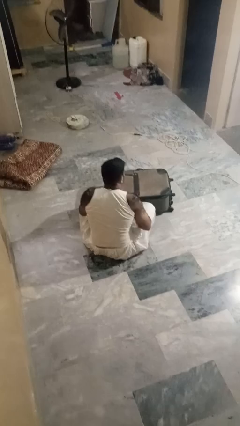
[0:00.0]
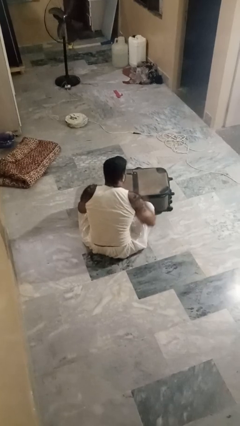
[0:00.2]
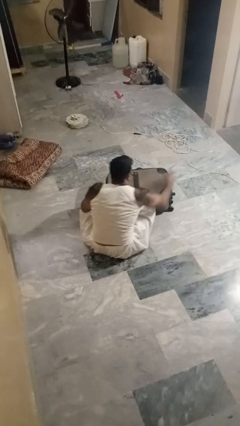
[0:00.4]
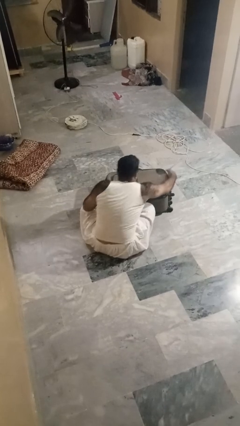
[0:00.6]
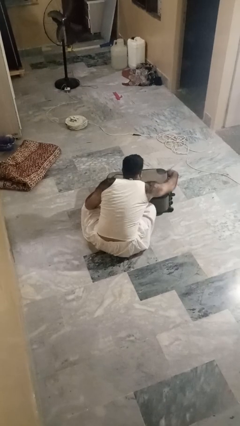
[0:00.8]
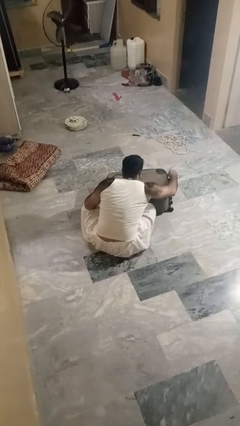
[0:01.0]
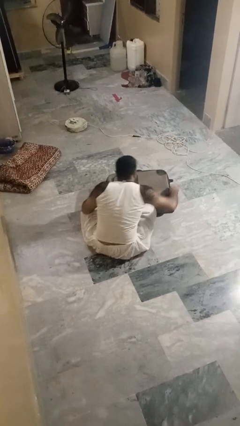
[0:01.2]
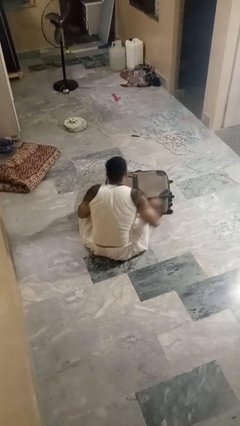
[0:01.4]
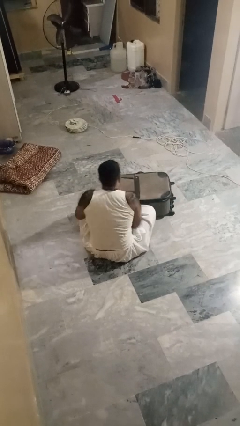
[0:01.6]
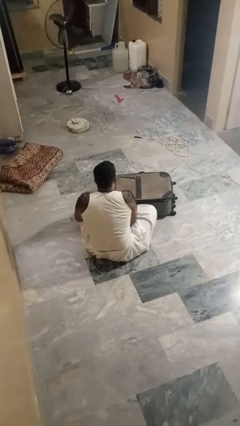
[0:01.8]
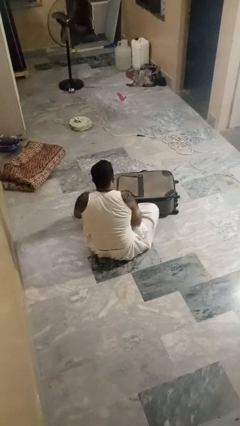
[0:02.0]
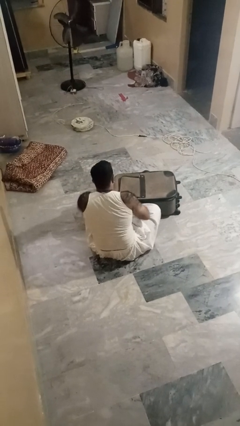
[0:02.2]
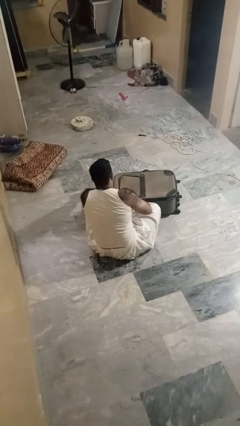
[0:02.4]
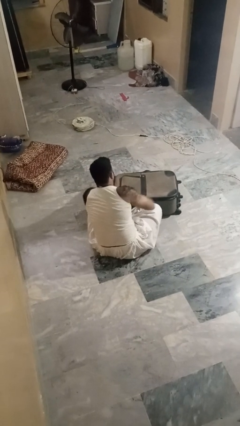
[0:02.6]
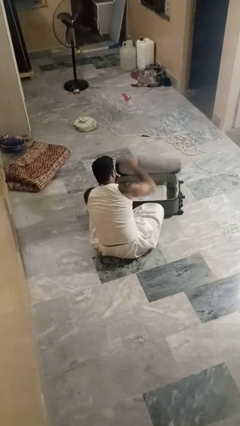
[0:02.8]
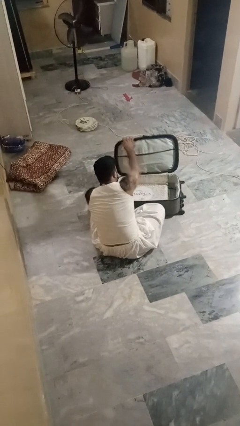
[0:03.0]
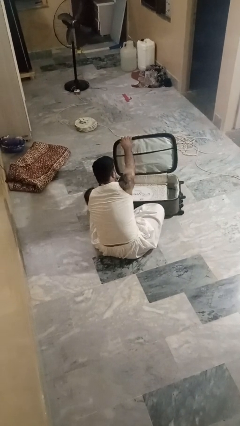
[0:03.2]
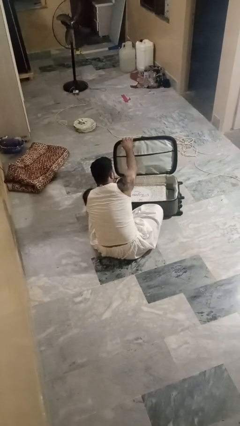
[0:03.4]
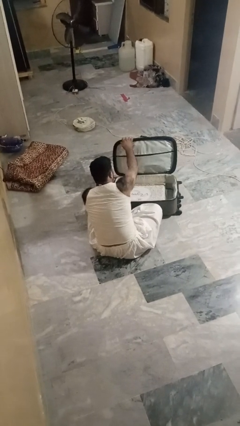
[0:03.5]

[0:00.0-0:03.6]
person opens suitcase

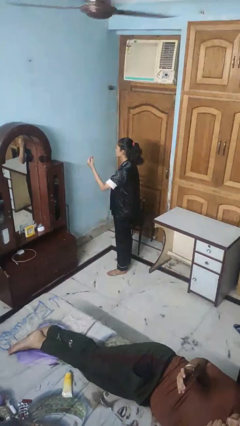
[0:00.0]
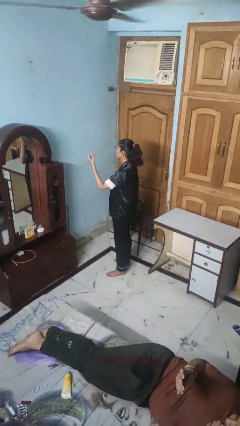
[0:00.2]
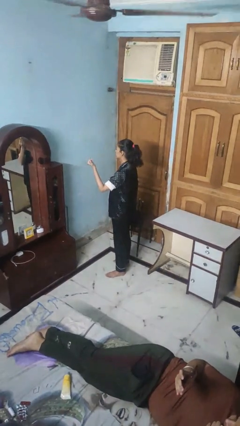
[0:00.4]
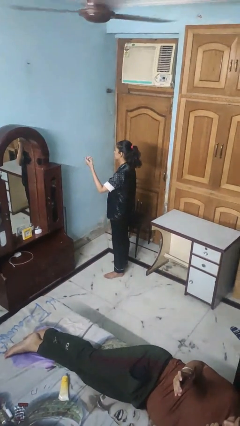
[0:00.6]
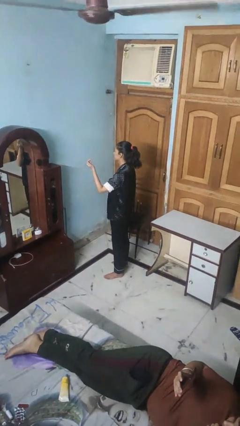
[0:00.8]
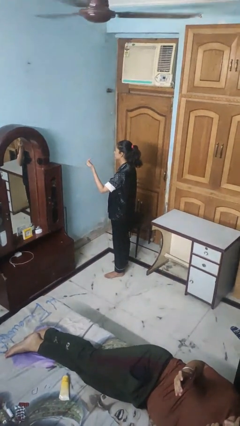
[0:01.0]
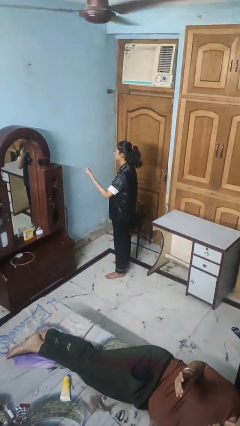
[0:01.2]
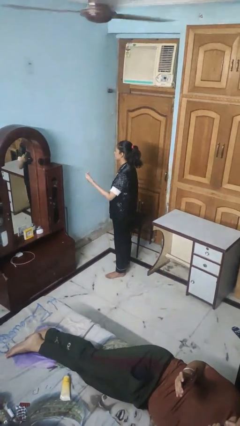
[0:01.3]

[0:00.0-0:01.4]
person snaps fingers

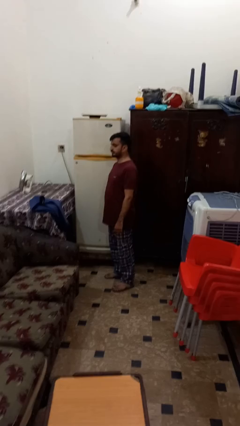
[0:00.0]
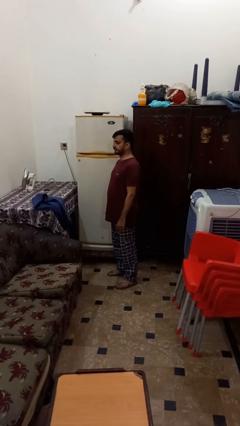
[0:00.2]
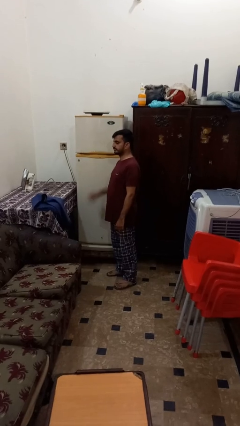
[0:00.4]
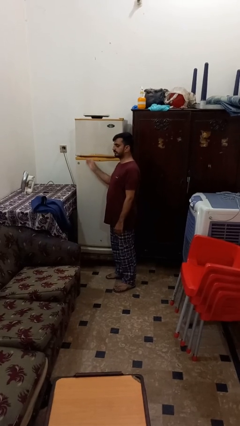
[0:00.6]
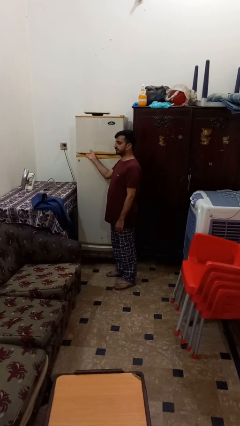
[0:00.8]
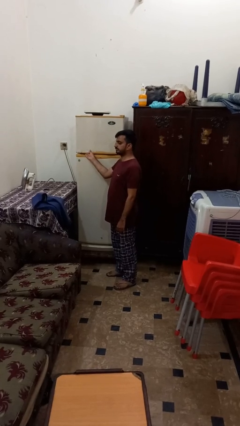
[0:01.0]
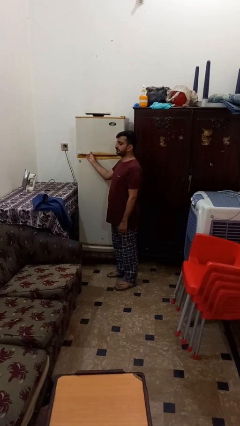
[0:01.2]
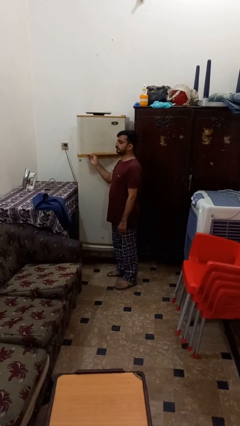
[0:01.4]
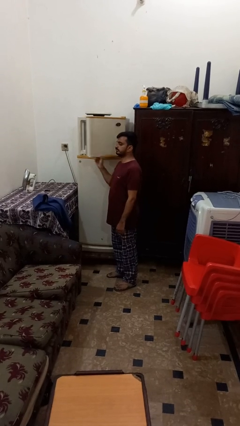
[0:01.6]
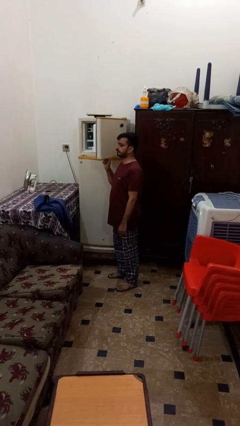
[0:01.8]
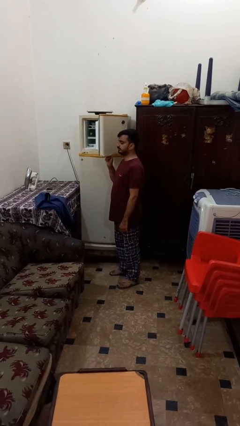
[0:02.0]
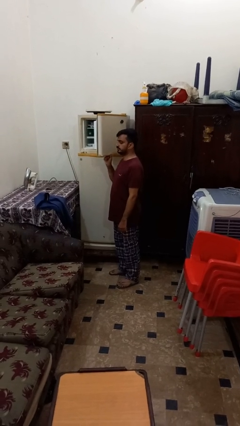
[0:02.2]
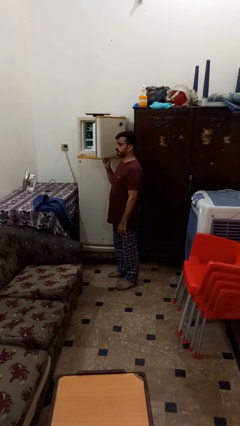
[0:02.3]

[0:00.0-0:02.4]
person opens refrigerator

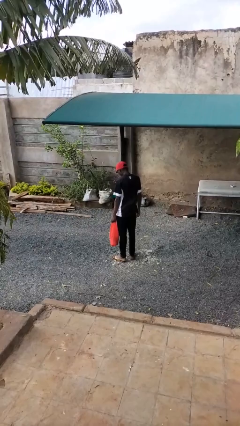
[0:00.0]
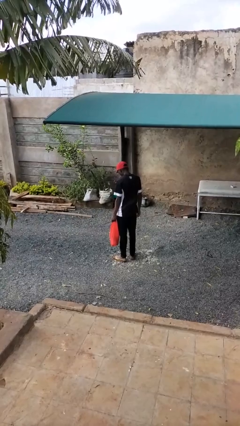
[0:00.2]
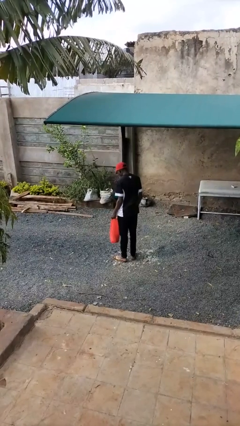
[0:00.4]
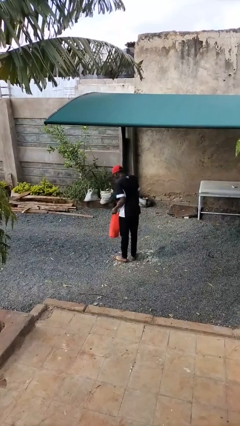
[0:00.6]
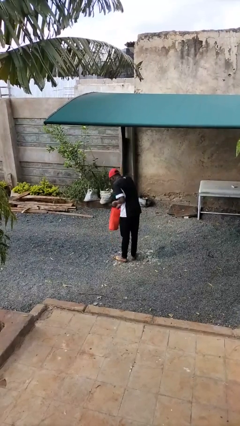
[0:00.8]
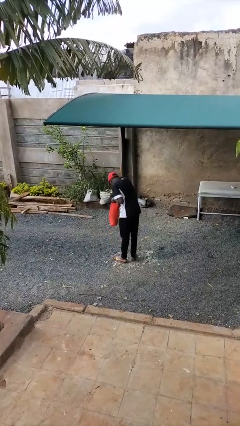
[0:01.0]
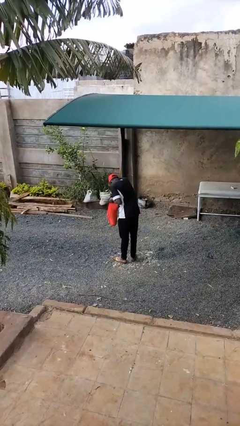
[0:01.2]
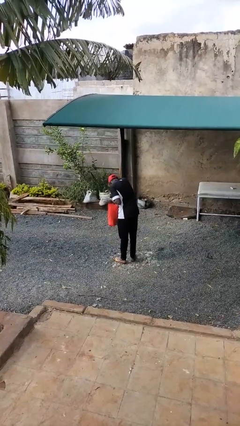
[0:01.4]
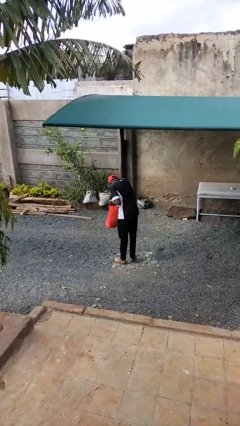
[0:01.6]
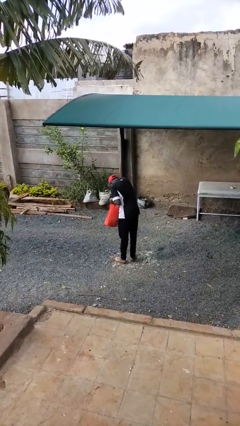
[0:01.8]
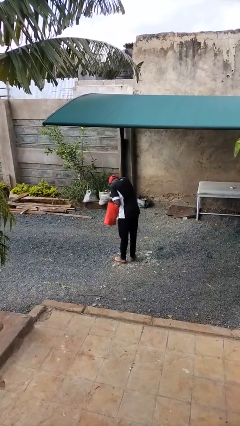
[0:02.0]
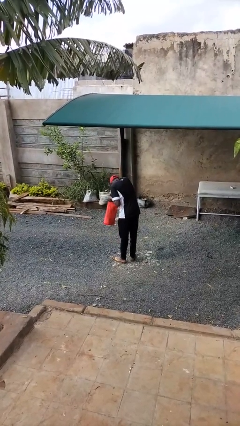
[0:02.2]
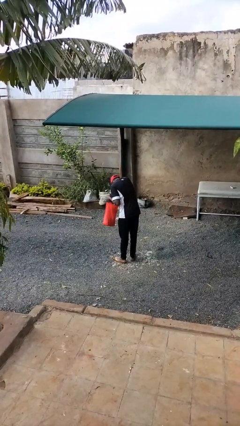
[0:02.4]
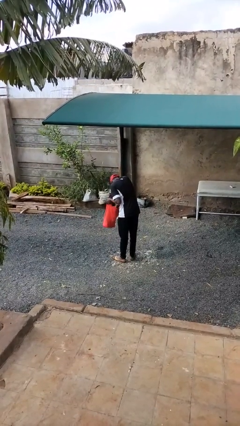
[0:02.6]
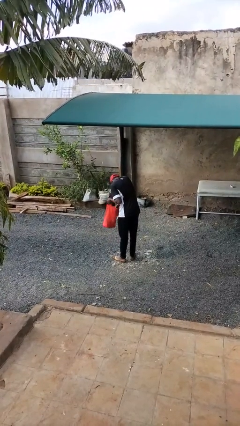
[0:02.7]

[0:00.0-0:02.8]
person searches in bag

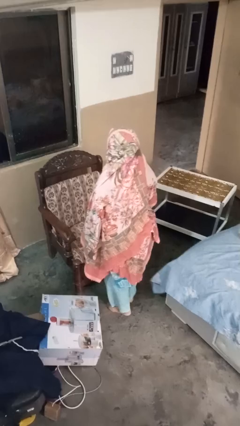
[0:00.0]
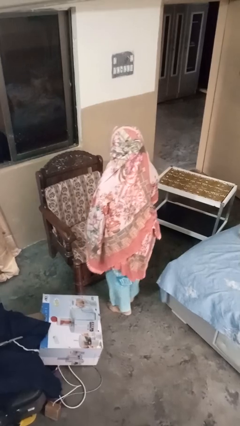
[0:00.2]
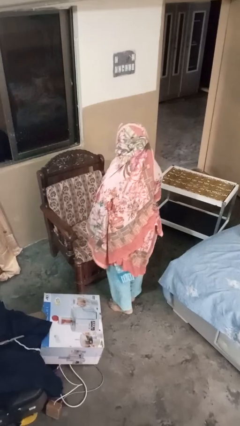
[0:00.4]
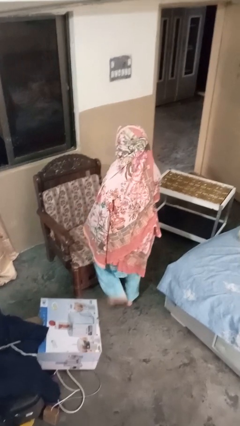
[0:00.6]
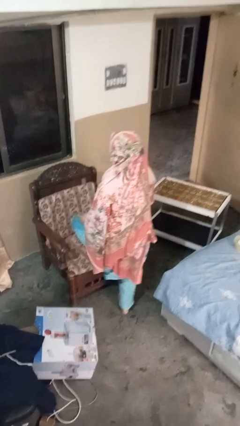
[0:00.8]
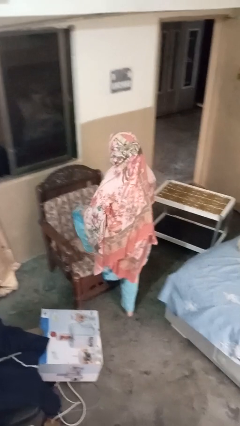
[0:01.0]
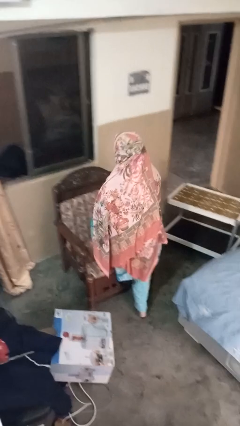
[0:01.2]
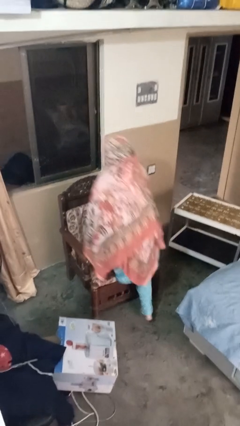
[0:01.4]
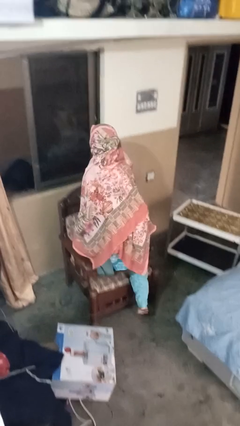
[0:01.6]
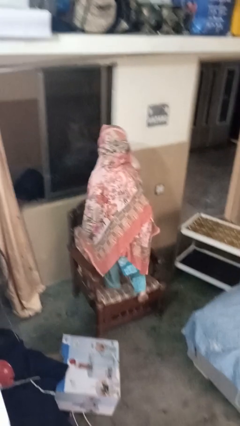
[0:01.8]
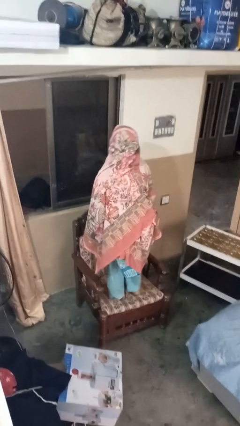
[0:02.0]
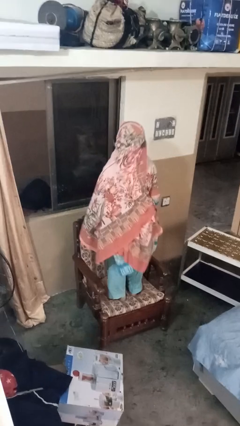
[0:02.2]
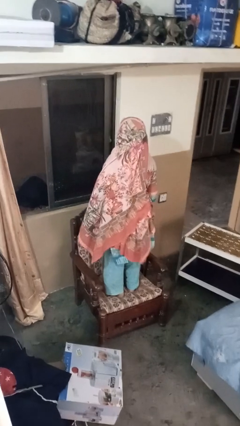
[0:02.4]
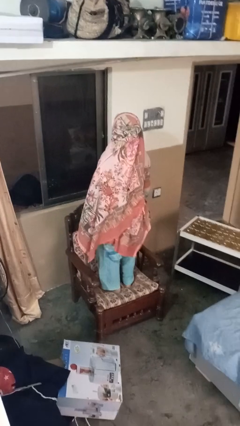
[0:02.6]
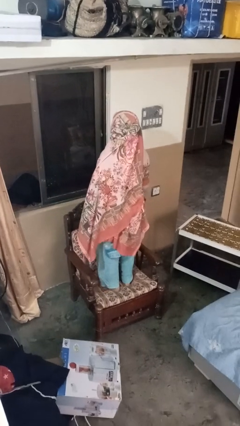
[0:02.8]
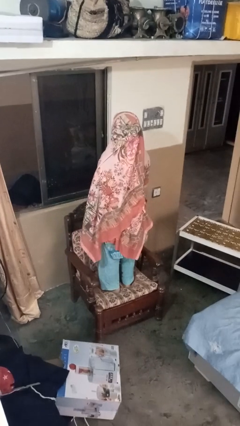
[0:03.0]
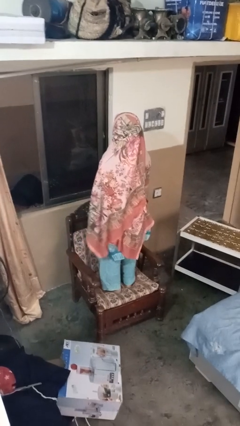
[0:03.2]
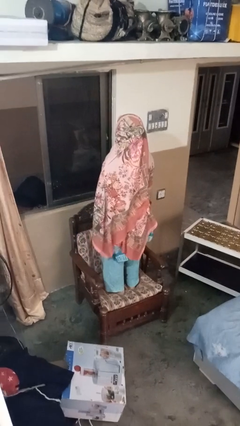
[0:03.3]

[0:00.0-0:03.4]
person climbs on couch

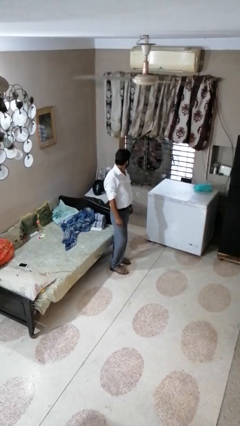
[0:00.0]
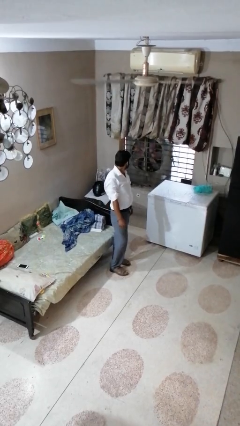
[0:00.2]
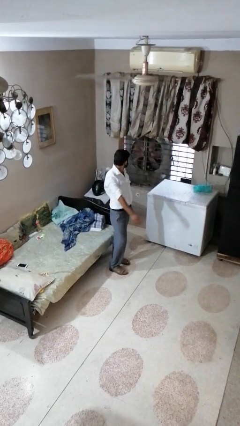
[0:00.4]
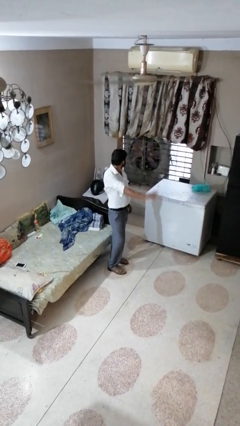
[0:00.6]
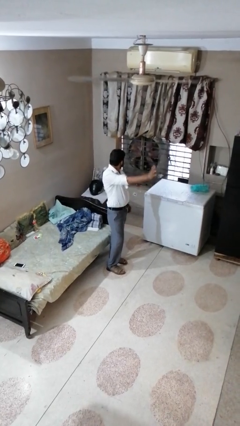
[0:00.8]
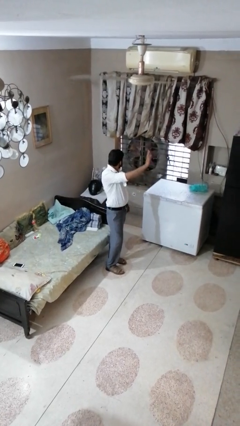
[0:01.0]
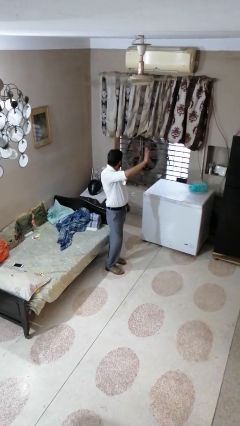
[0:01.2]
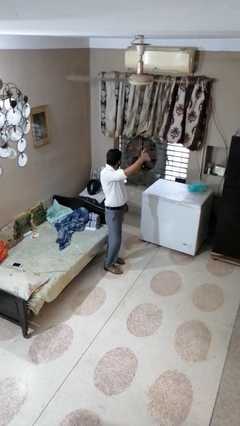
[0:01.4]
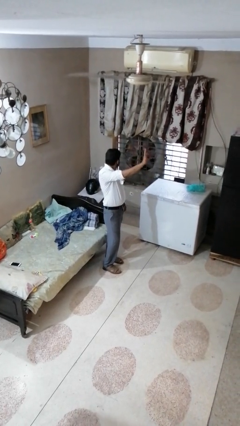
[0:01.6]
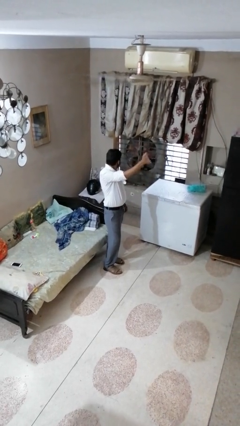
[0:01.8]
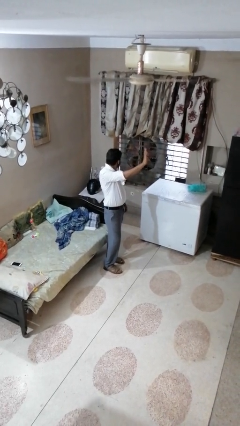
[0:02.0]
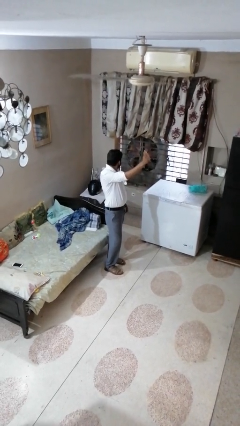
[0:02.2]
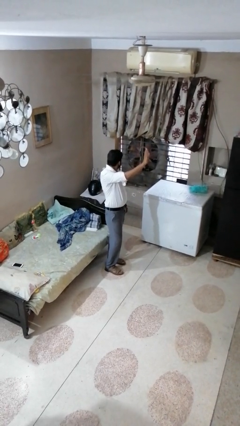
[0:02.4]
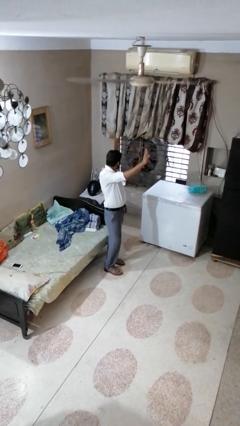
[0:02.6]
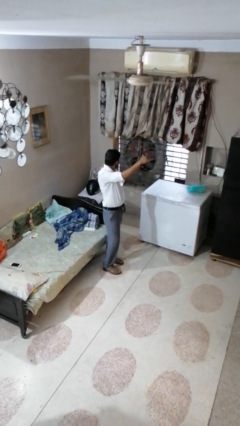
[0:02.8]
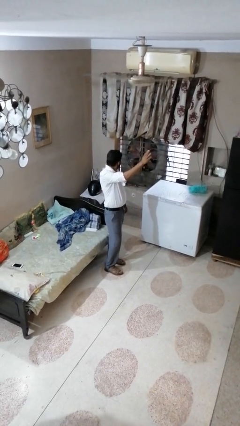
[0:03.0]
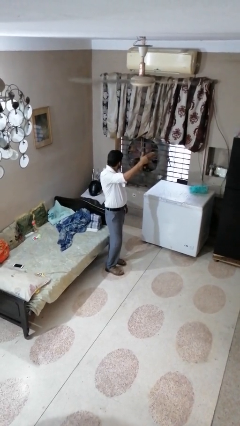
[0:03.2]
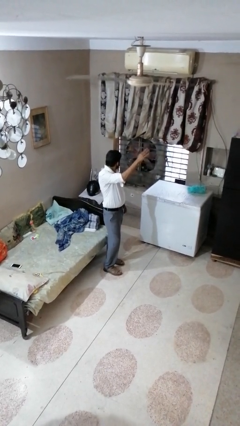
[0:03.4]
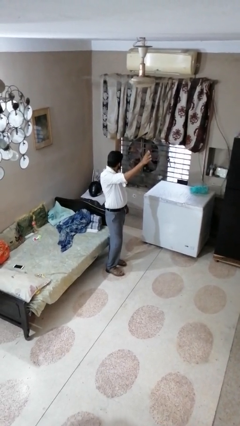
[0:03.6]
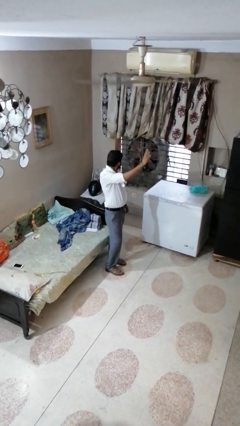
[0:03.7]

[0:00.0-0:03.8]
person waves at person

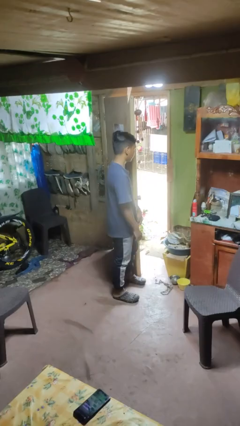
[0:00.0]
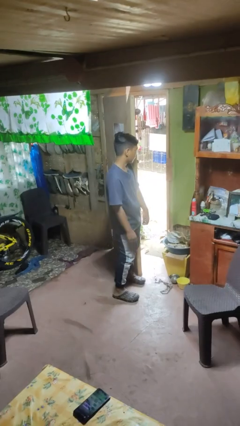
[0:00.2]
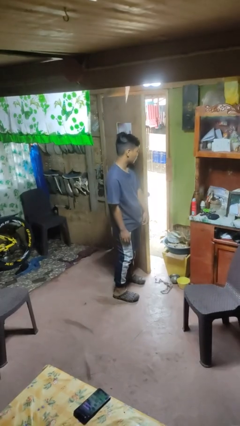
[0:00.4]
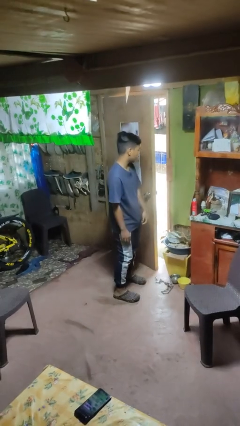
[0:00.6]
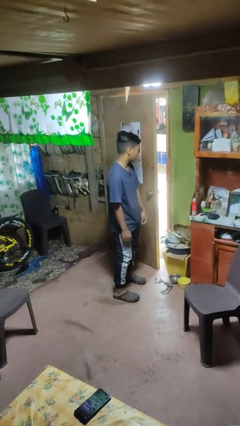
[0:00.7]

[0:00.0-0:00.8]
person closes door with hip
